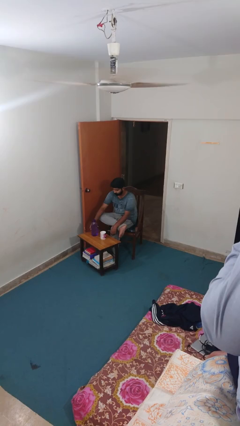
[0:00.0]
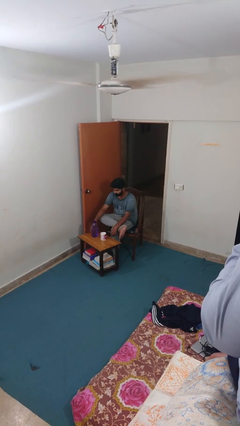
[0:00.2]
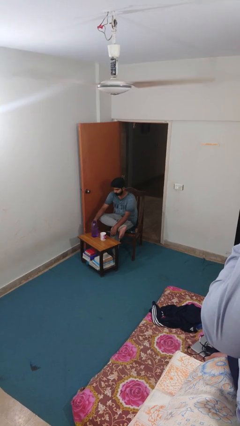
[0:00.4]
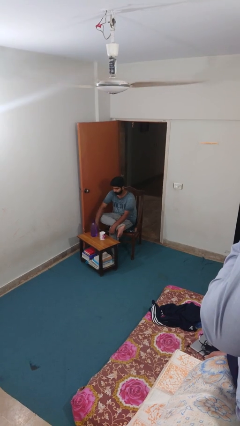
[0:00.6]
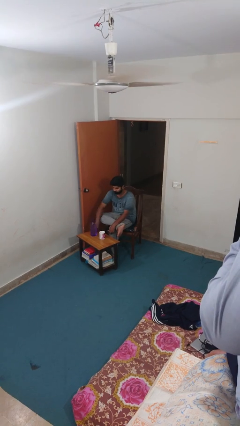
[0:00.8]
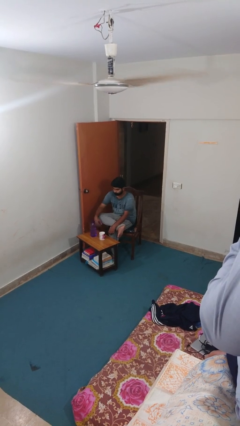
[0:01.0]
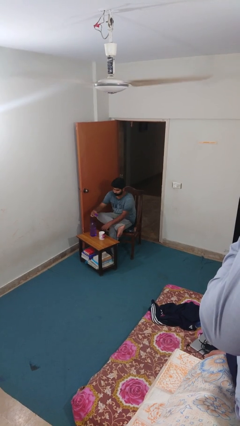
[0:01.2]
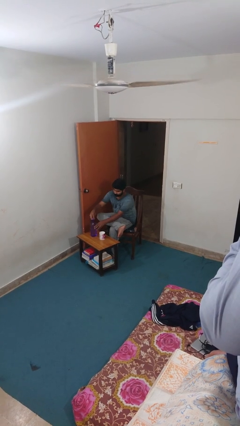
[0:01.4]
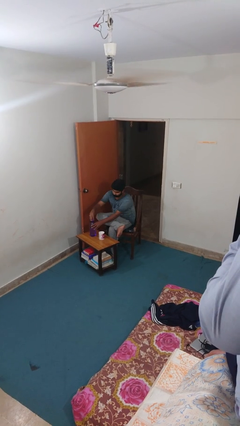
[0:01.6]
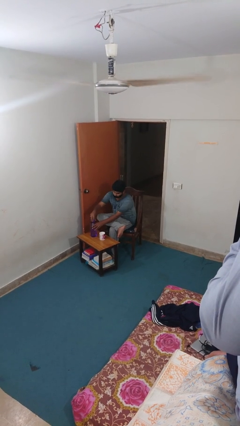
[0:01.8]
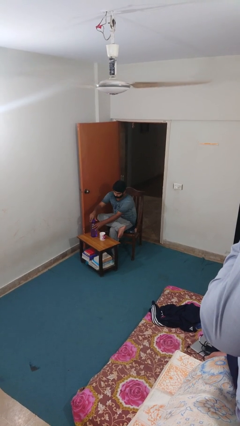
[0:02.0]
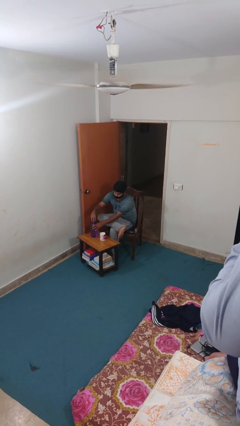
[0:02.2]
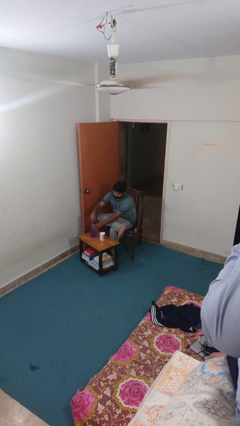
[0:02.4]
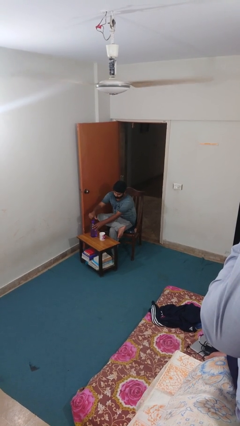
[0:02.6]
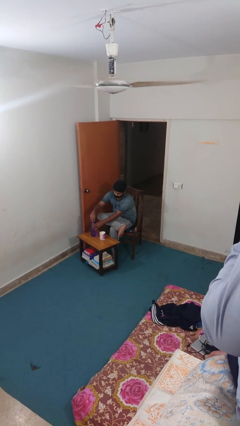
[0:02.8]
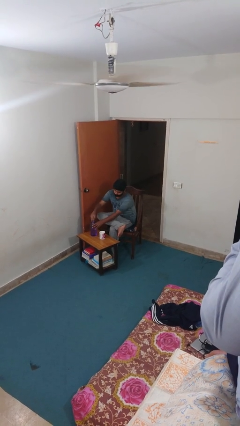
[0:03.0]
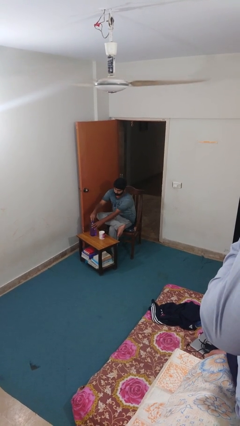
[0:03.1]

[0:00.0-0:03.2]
person screws lid to bottle

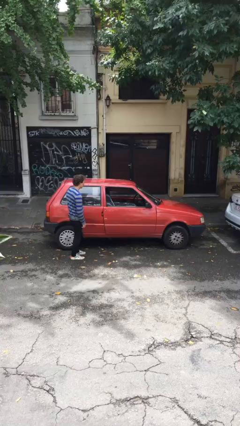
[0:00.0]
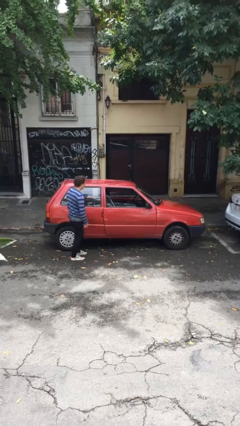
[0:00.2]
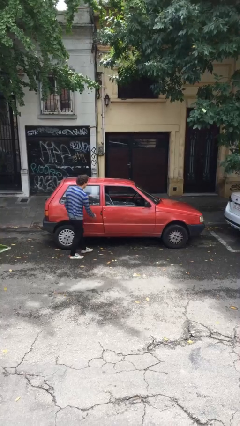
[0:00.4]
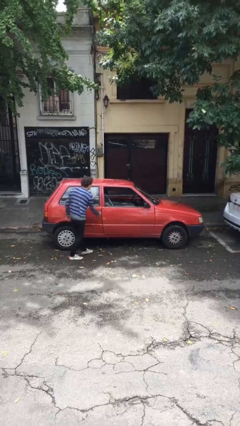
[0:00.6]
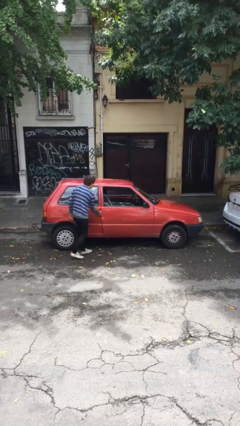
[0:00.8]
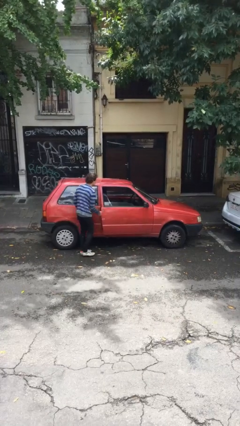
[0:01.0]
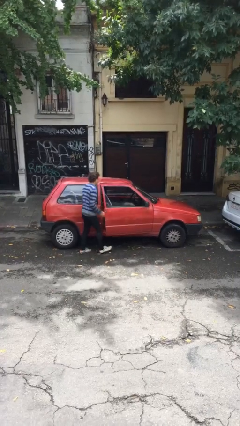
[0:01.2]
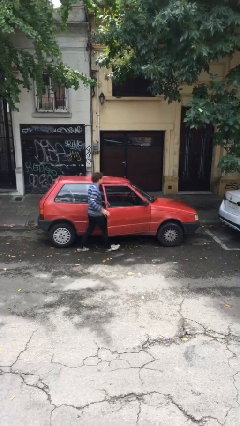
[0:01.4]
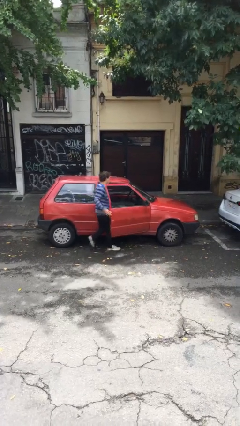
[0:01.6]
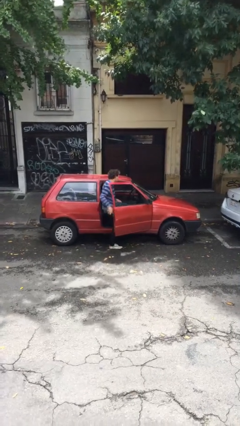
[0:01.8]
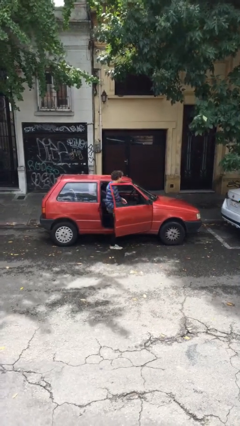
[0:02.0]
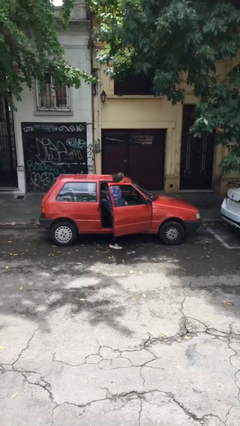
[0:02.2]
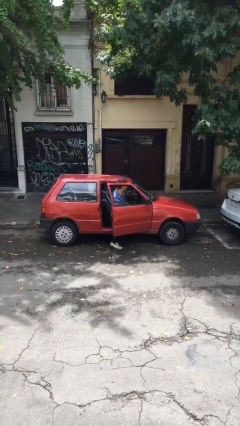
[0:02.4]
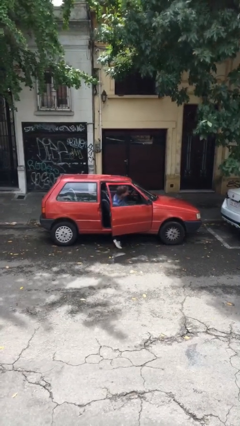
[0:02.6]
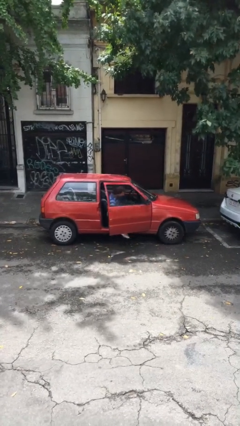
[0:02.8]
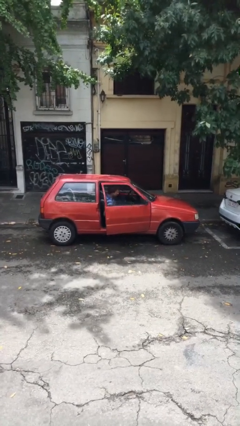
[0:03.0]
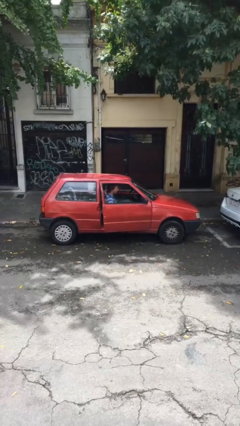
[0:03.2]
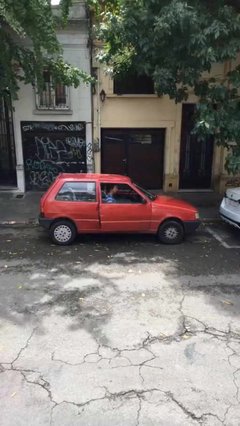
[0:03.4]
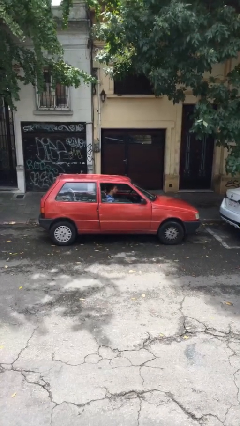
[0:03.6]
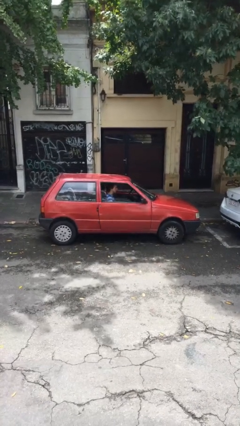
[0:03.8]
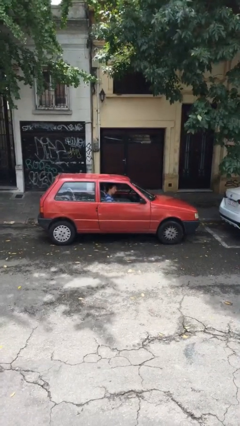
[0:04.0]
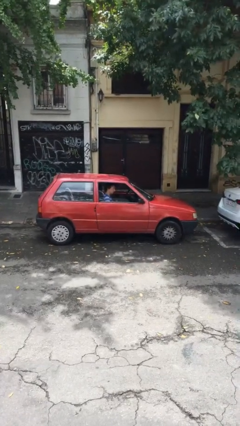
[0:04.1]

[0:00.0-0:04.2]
car picks up person

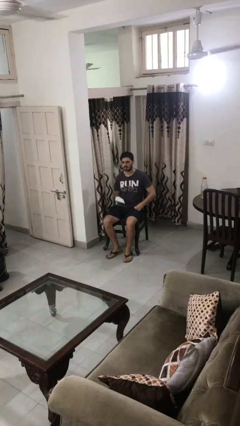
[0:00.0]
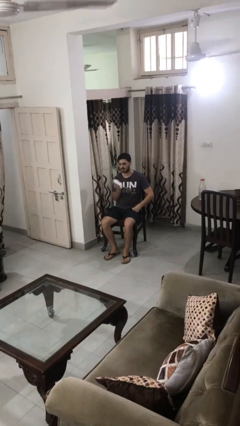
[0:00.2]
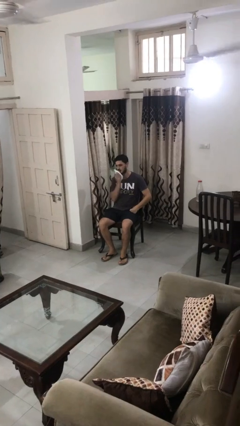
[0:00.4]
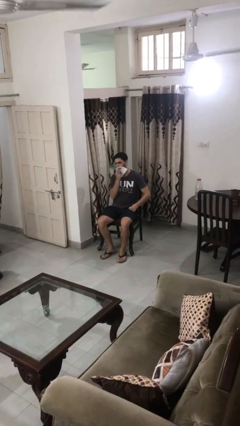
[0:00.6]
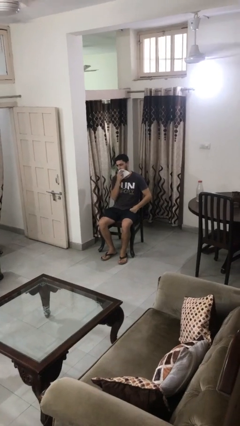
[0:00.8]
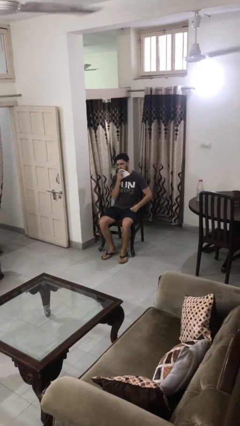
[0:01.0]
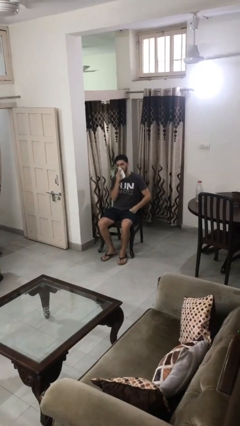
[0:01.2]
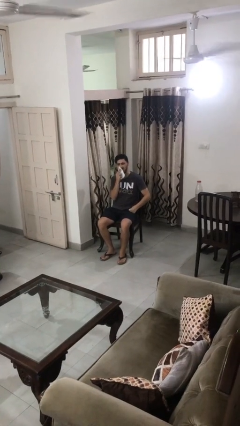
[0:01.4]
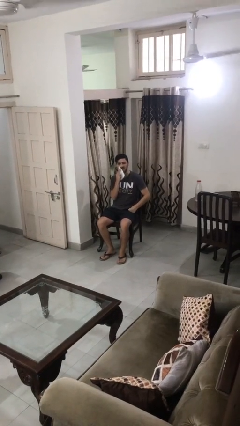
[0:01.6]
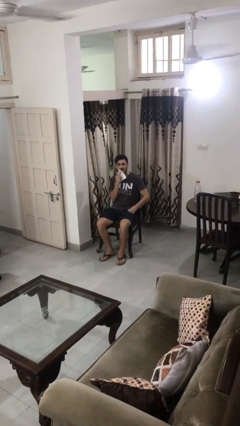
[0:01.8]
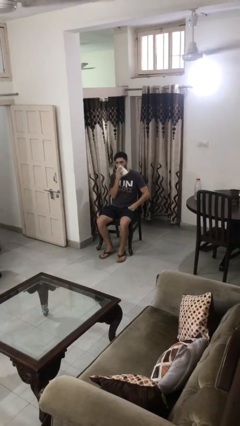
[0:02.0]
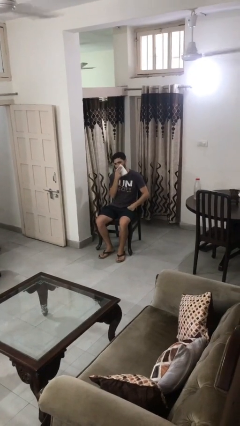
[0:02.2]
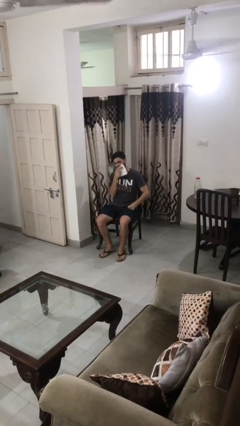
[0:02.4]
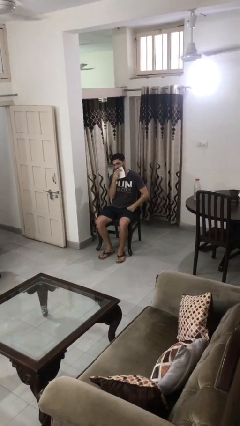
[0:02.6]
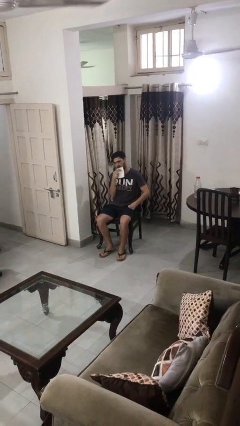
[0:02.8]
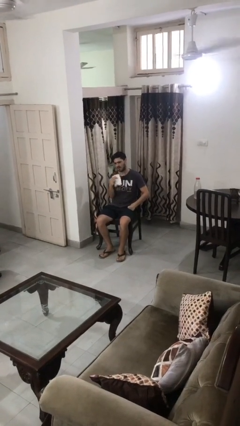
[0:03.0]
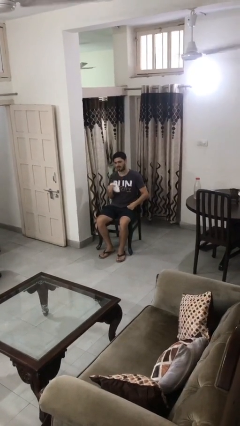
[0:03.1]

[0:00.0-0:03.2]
person wipes mouth with napkin

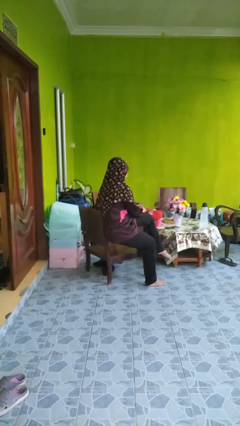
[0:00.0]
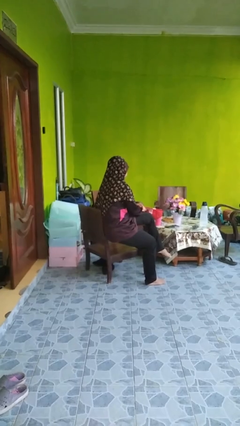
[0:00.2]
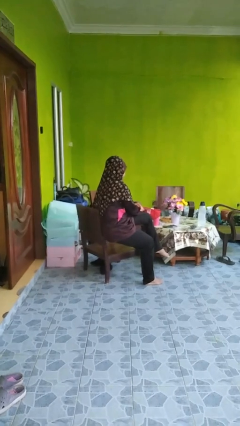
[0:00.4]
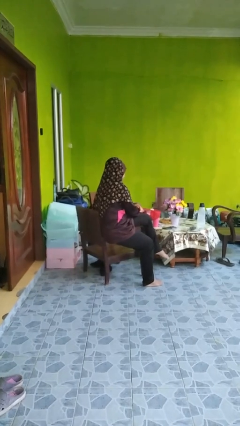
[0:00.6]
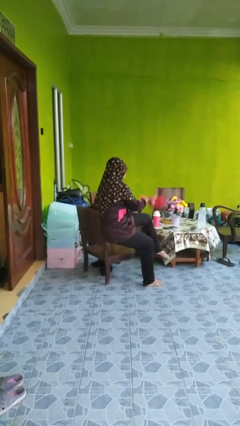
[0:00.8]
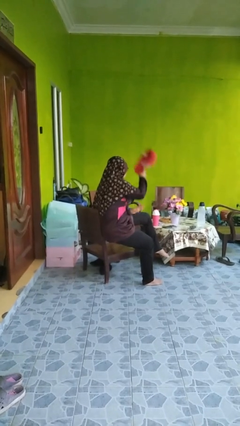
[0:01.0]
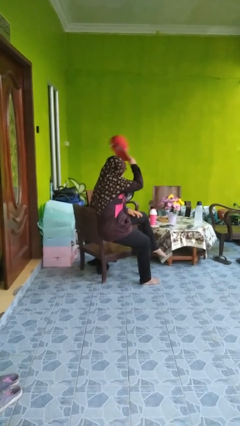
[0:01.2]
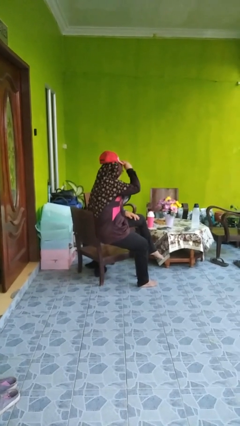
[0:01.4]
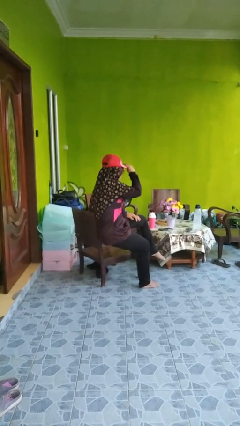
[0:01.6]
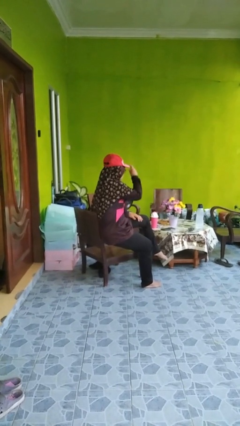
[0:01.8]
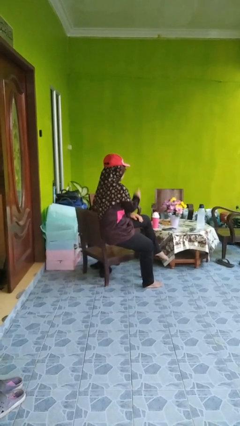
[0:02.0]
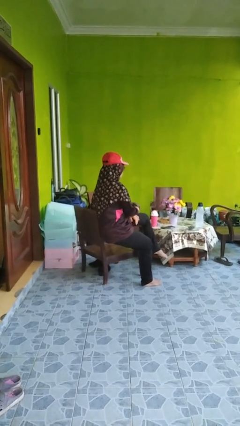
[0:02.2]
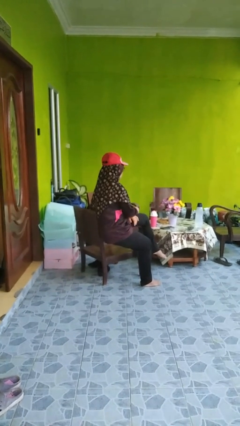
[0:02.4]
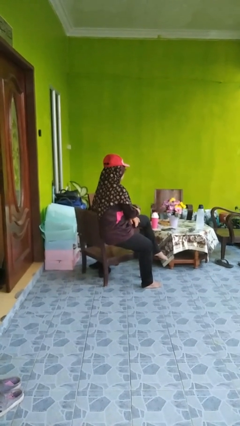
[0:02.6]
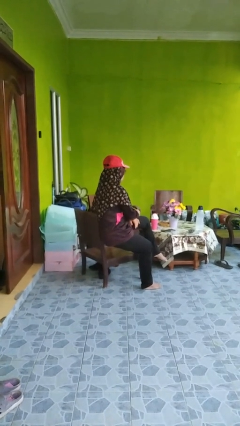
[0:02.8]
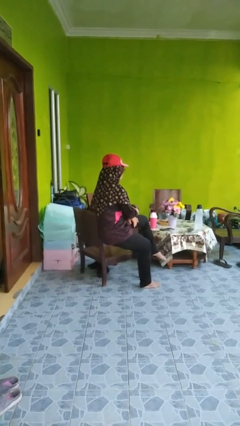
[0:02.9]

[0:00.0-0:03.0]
person puts on hat

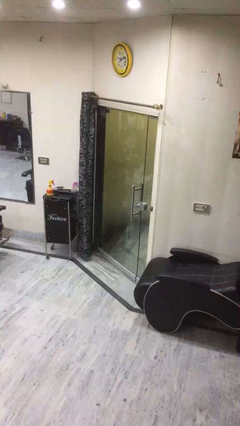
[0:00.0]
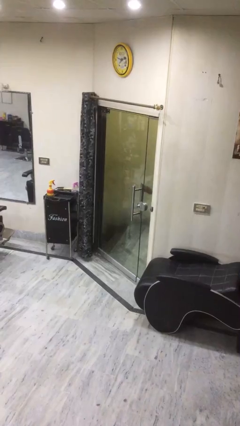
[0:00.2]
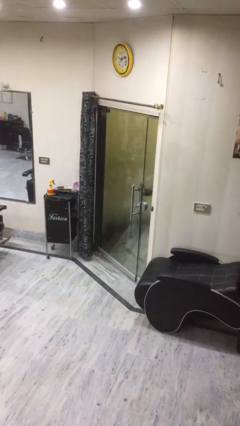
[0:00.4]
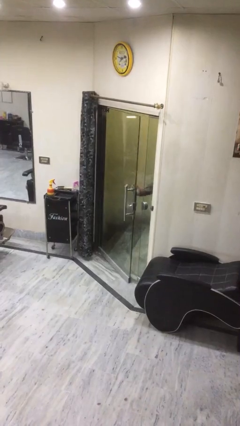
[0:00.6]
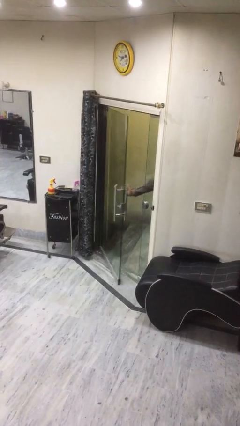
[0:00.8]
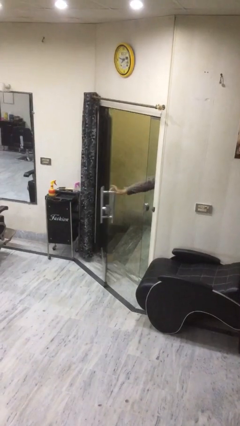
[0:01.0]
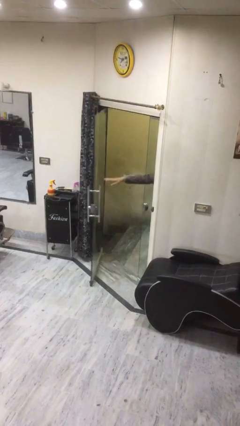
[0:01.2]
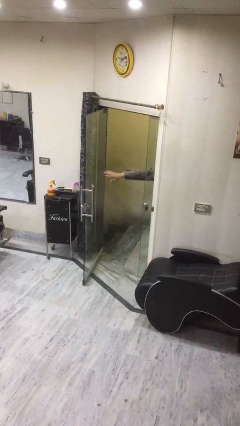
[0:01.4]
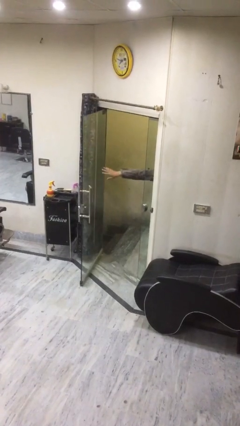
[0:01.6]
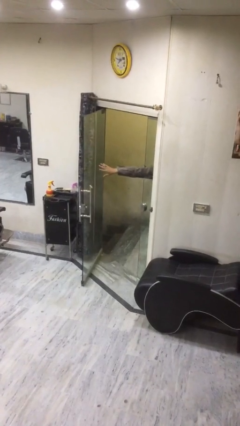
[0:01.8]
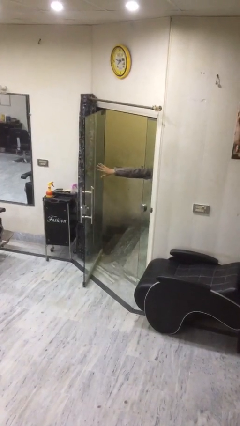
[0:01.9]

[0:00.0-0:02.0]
person opens facility door

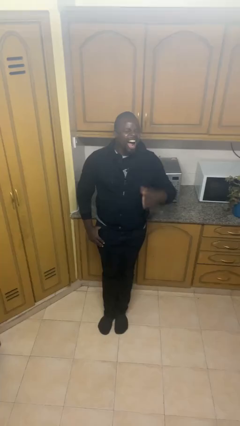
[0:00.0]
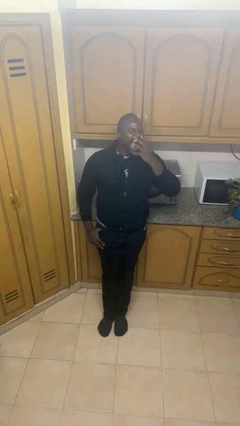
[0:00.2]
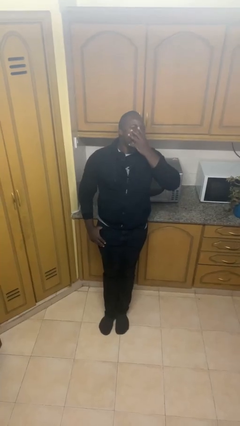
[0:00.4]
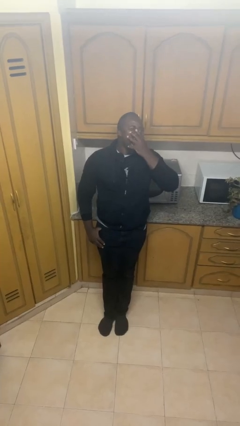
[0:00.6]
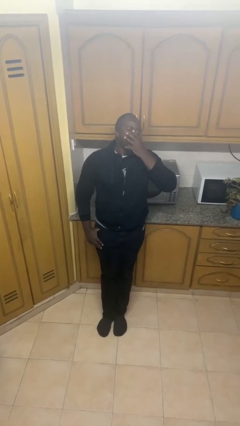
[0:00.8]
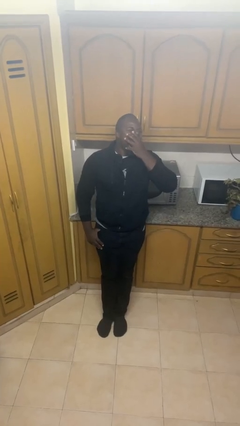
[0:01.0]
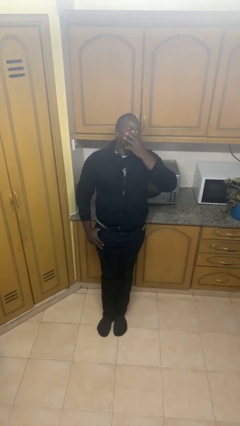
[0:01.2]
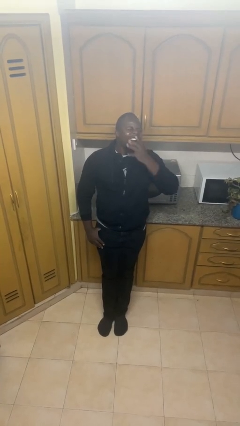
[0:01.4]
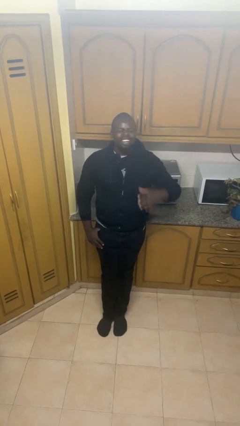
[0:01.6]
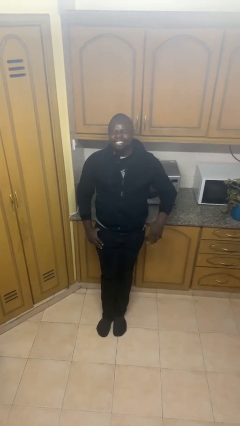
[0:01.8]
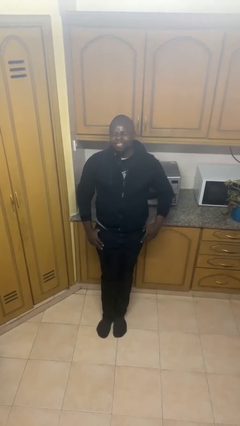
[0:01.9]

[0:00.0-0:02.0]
person yawns
